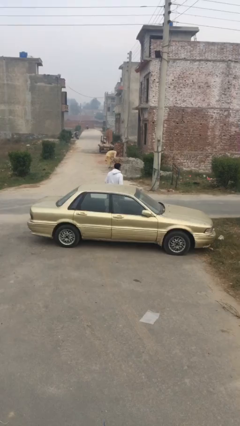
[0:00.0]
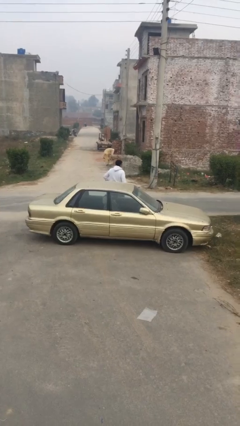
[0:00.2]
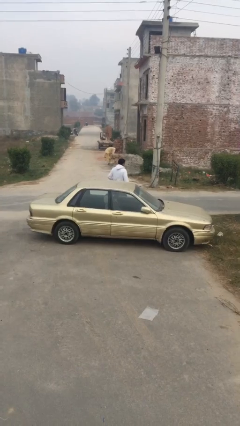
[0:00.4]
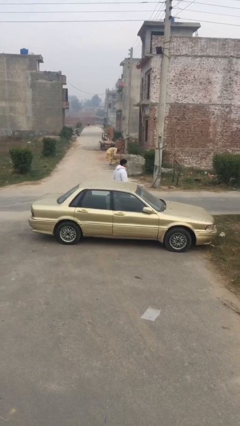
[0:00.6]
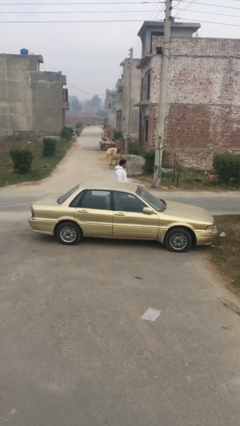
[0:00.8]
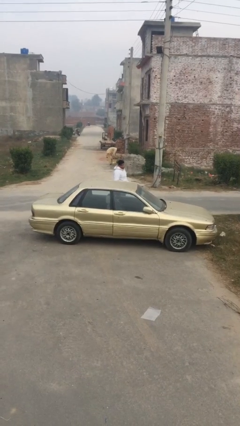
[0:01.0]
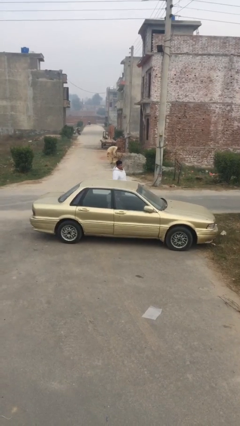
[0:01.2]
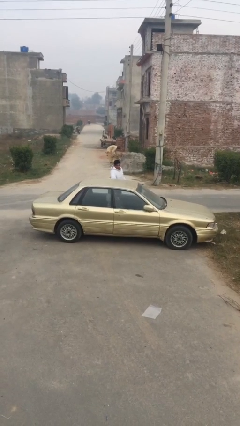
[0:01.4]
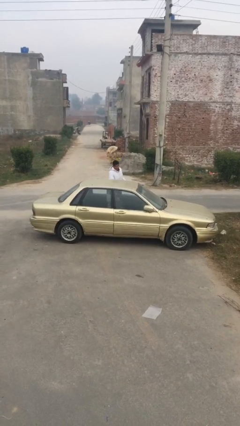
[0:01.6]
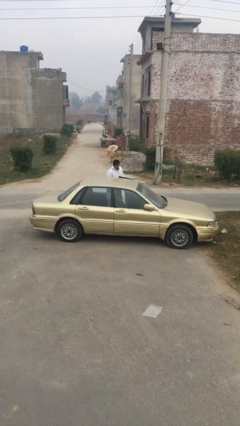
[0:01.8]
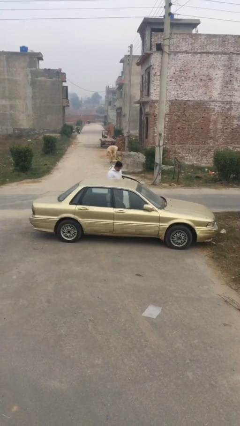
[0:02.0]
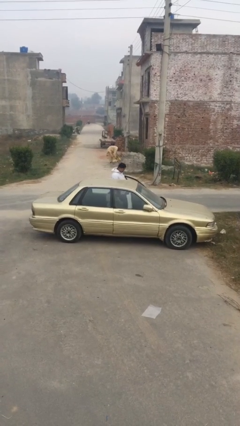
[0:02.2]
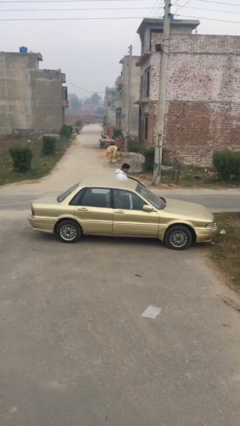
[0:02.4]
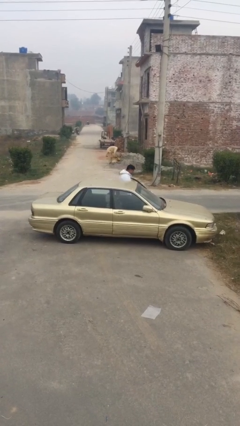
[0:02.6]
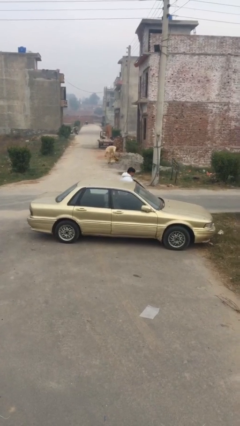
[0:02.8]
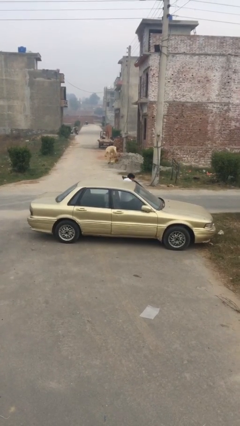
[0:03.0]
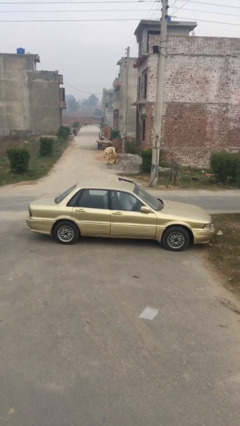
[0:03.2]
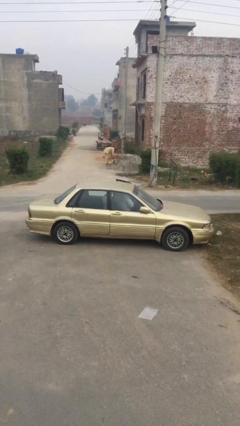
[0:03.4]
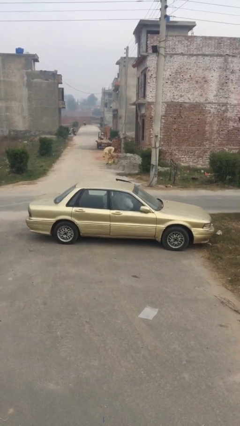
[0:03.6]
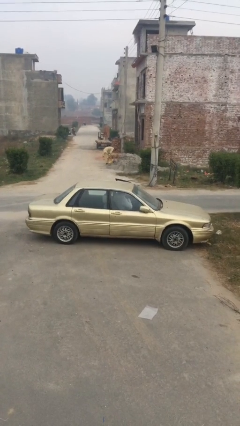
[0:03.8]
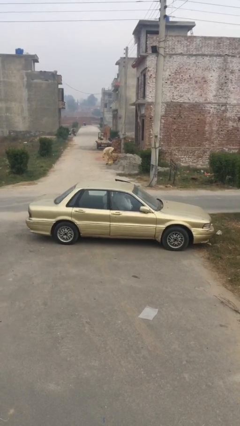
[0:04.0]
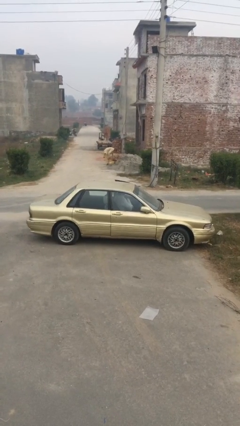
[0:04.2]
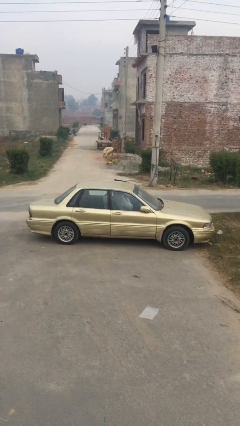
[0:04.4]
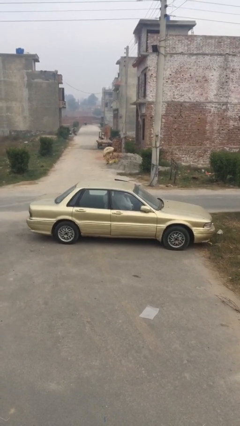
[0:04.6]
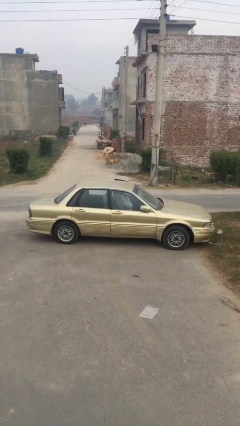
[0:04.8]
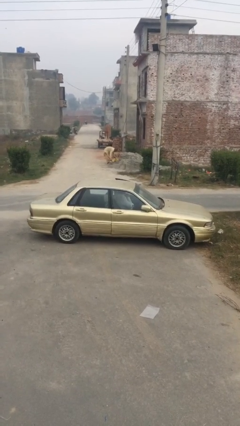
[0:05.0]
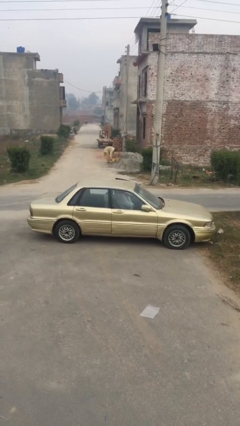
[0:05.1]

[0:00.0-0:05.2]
car picks up person

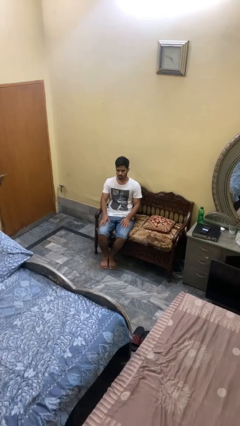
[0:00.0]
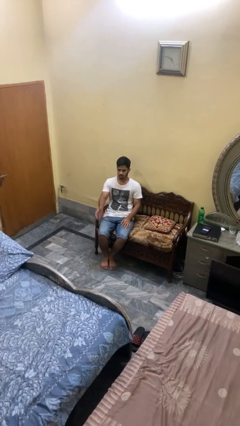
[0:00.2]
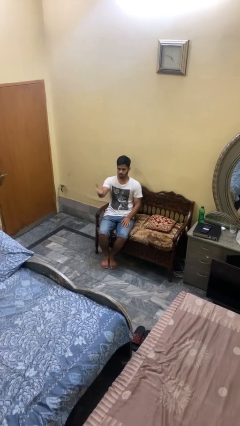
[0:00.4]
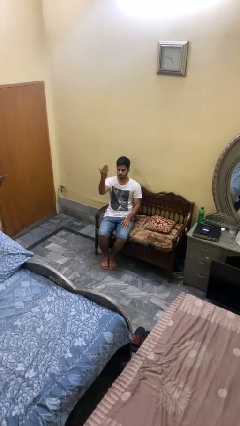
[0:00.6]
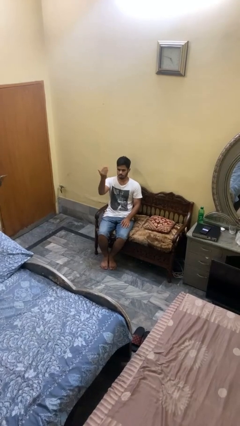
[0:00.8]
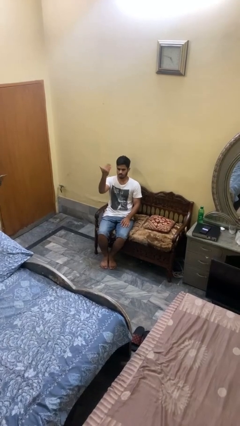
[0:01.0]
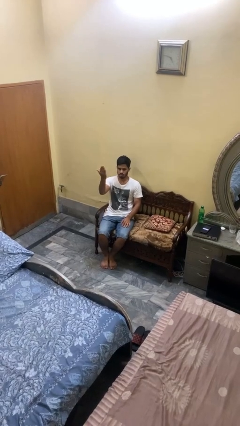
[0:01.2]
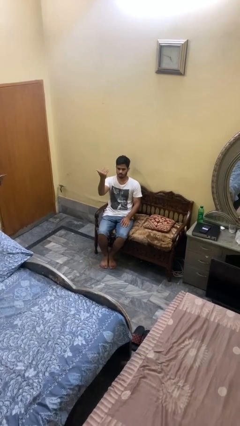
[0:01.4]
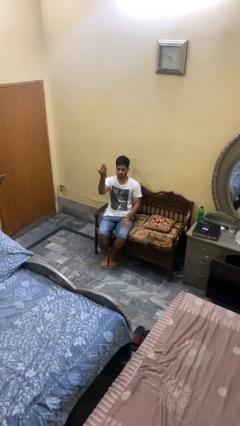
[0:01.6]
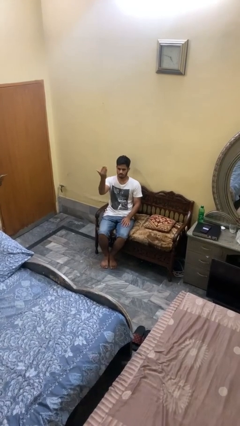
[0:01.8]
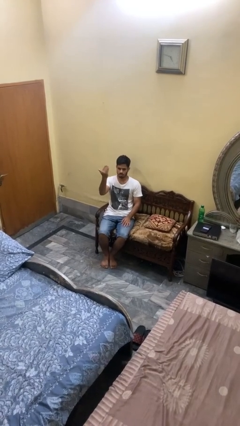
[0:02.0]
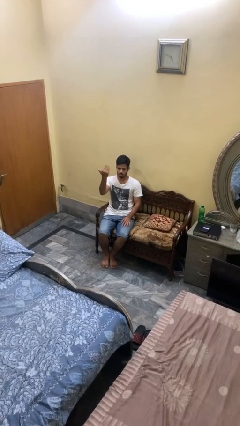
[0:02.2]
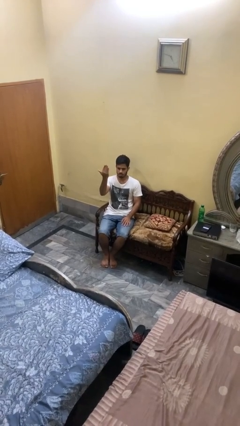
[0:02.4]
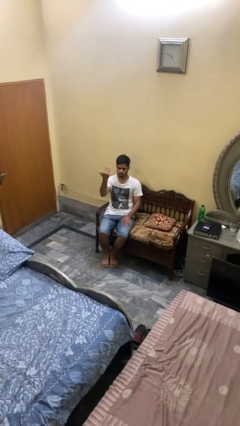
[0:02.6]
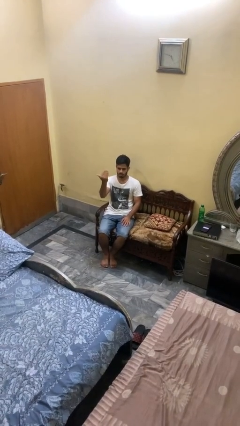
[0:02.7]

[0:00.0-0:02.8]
person gestures come here

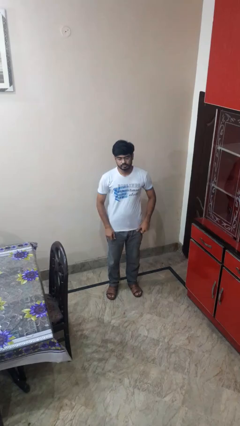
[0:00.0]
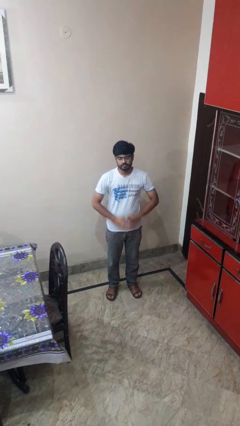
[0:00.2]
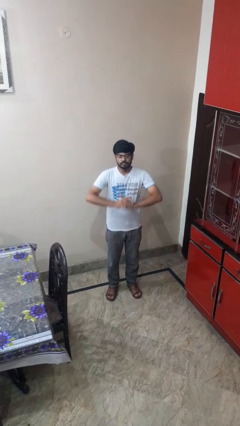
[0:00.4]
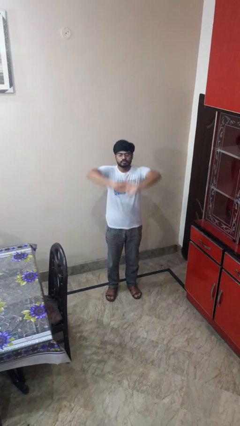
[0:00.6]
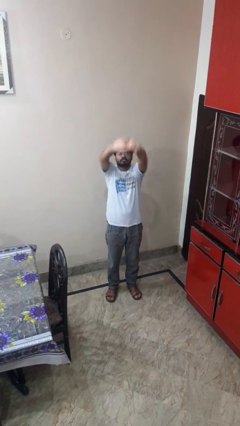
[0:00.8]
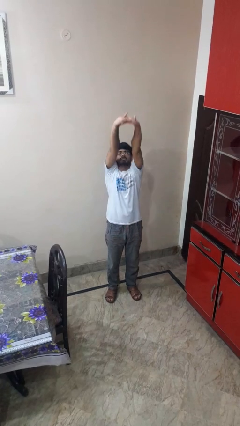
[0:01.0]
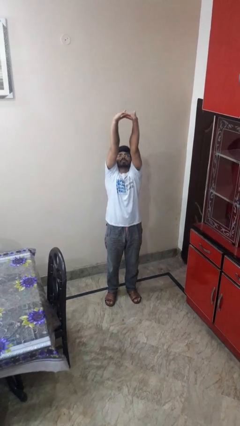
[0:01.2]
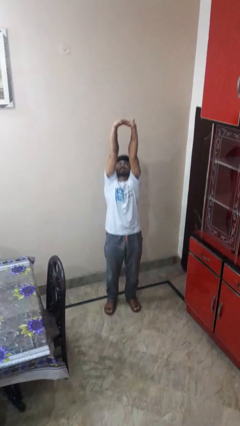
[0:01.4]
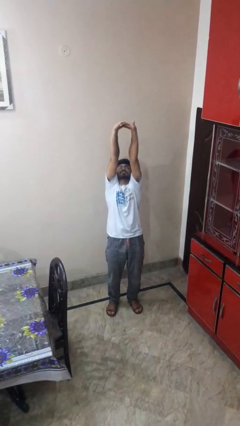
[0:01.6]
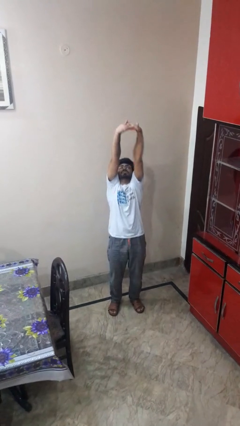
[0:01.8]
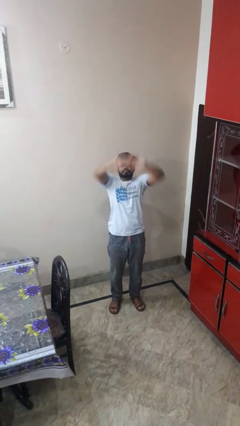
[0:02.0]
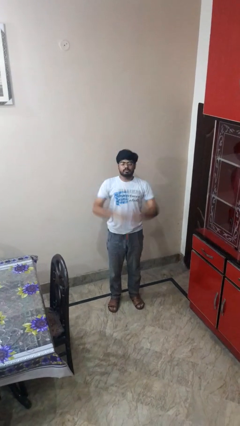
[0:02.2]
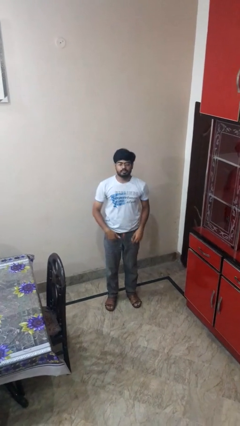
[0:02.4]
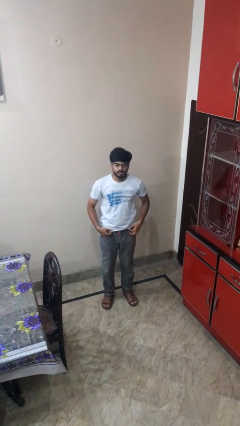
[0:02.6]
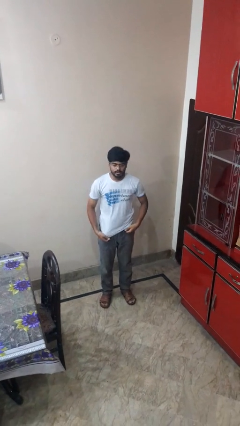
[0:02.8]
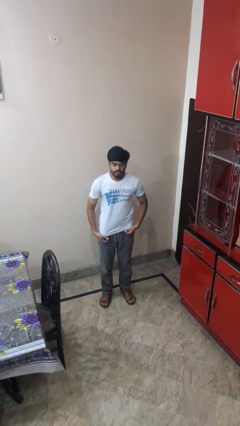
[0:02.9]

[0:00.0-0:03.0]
person stretches arms over head

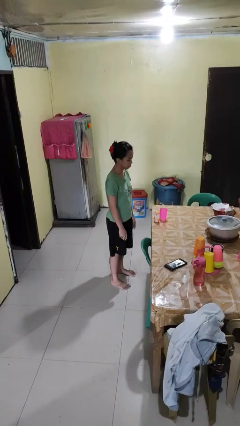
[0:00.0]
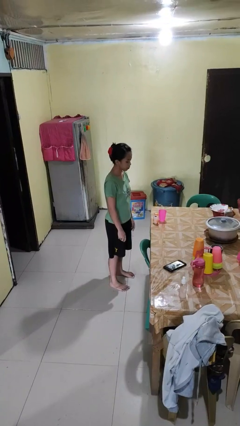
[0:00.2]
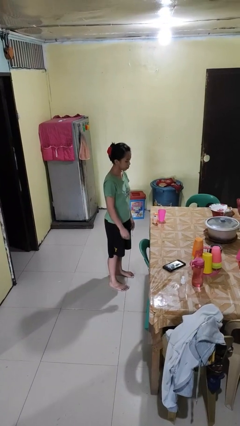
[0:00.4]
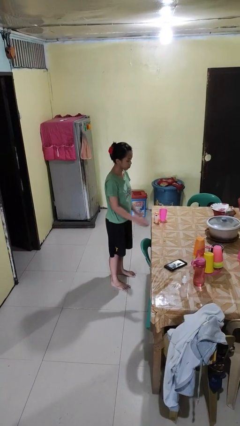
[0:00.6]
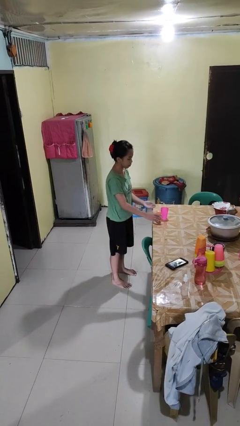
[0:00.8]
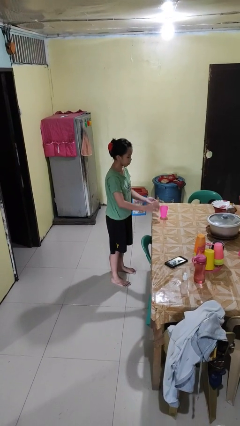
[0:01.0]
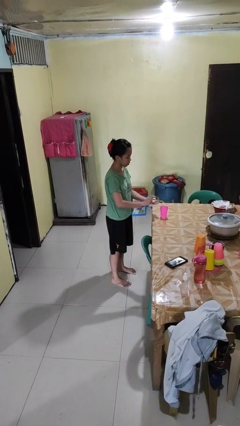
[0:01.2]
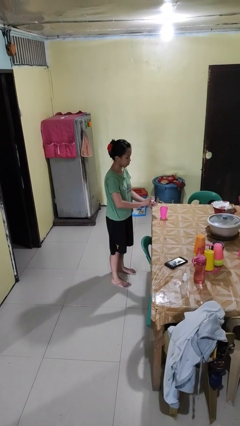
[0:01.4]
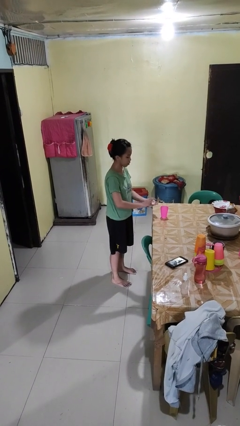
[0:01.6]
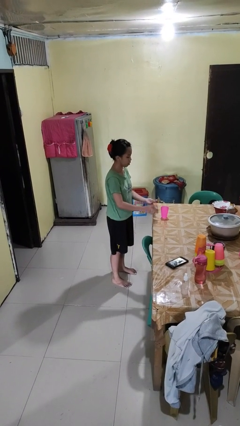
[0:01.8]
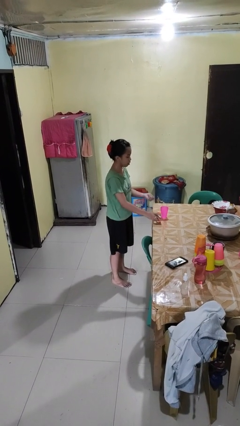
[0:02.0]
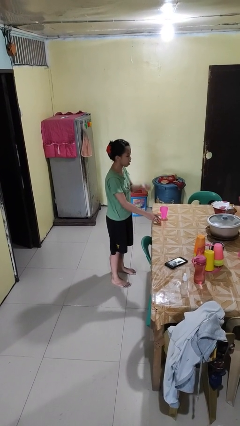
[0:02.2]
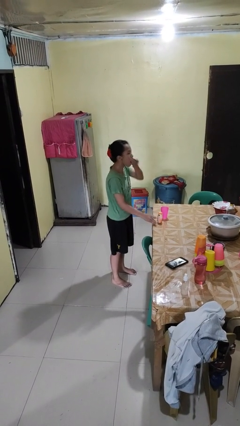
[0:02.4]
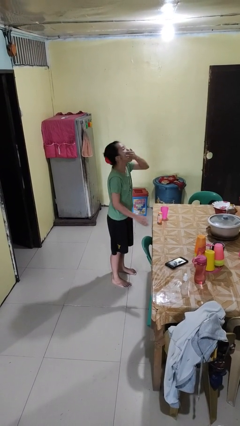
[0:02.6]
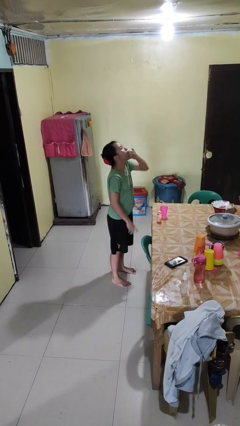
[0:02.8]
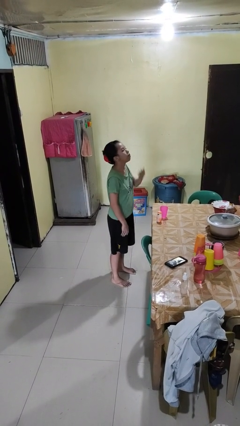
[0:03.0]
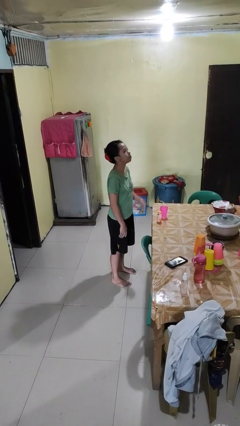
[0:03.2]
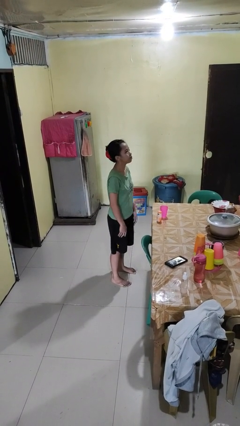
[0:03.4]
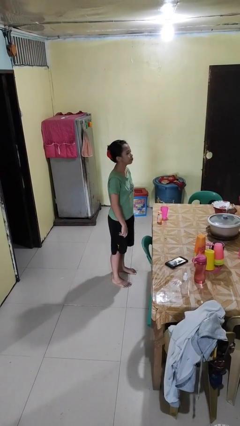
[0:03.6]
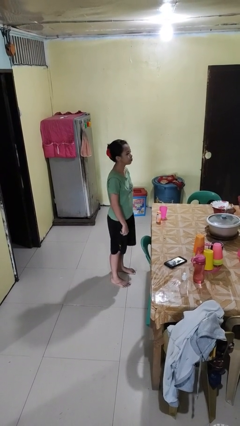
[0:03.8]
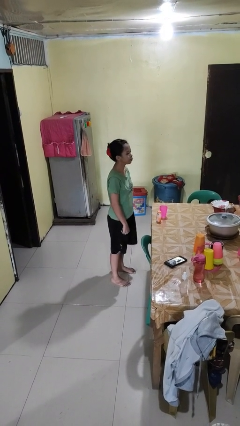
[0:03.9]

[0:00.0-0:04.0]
person takes medicine pills

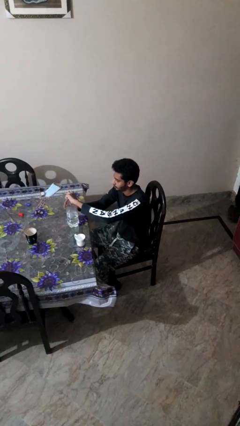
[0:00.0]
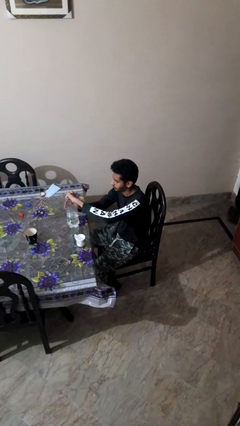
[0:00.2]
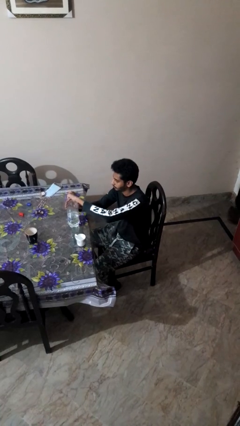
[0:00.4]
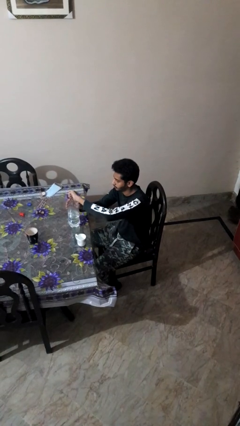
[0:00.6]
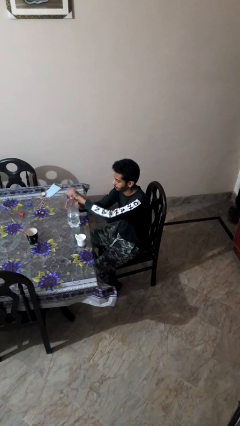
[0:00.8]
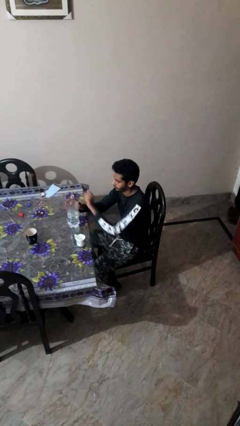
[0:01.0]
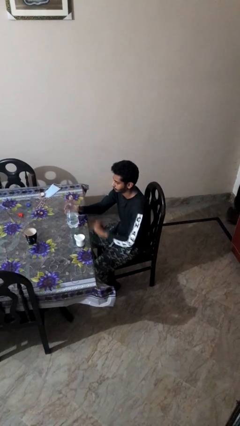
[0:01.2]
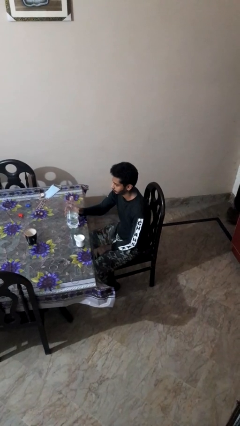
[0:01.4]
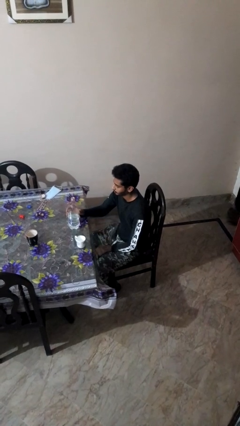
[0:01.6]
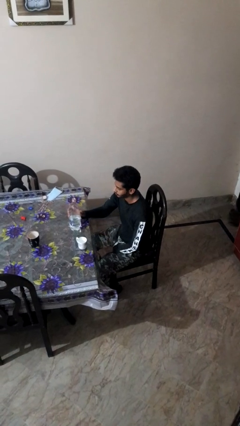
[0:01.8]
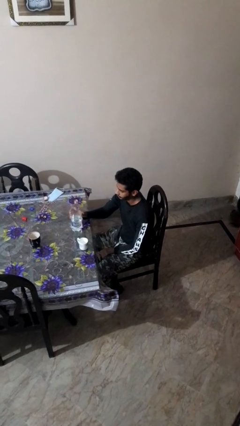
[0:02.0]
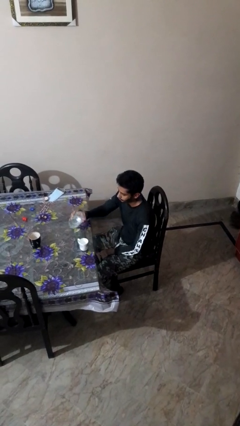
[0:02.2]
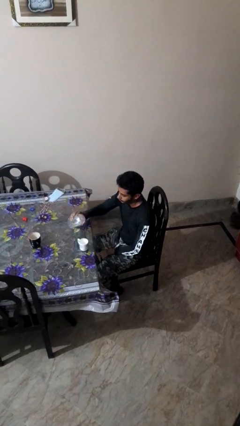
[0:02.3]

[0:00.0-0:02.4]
person unscrews lid from bottle
